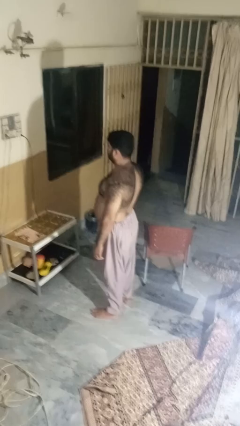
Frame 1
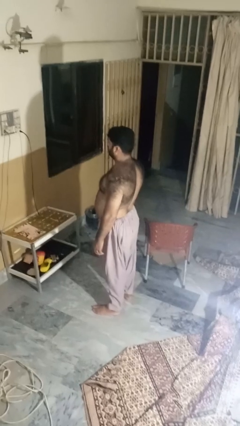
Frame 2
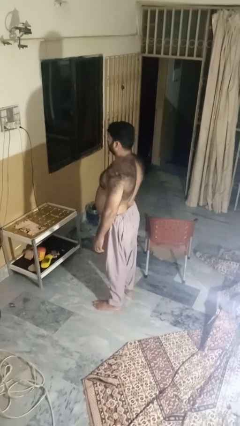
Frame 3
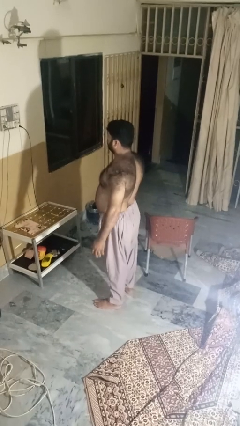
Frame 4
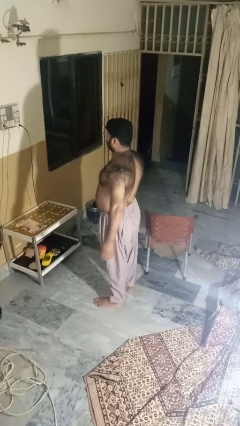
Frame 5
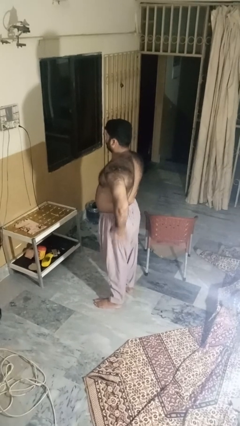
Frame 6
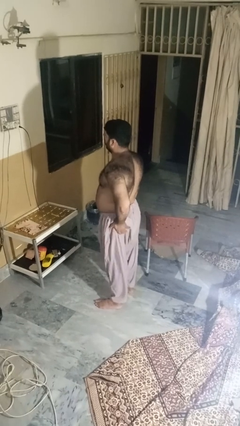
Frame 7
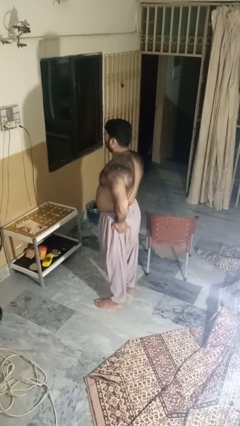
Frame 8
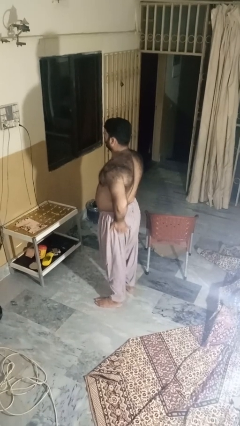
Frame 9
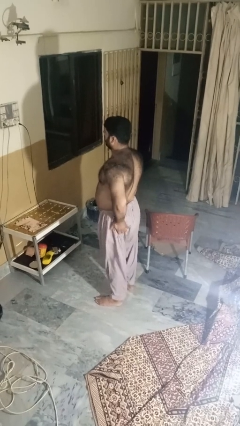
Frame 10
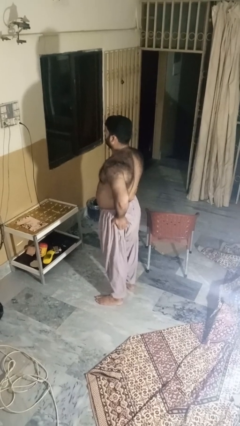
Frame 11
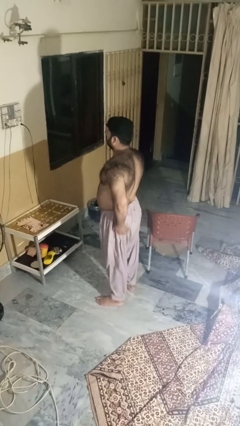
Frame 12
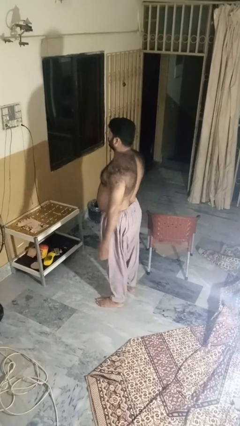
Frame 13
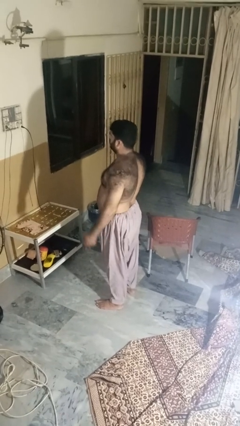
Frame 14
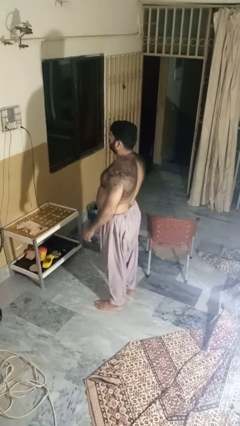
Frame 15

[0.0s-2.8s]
person wiggles hips

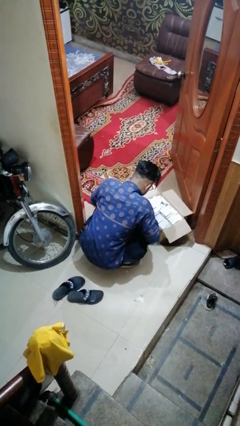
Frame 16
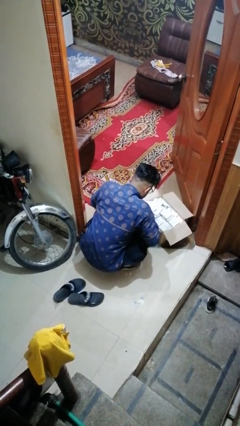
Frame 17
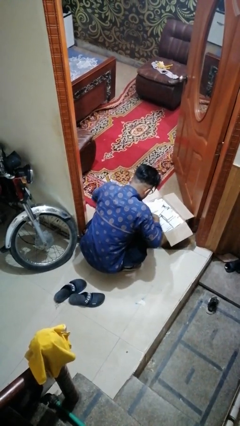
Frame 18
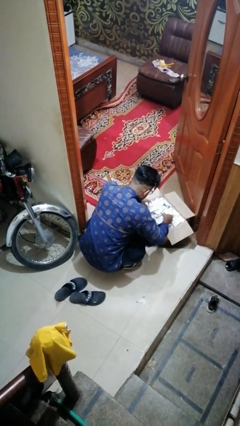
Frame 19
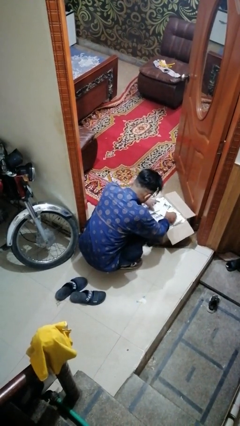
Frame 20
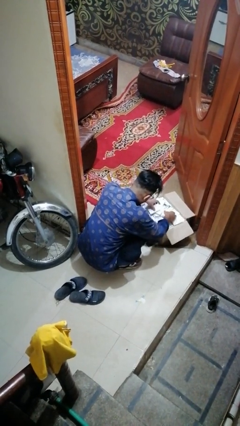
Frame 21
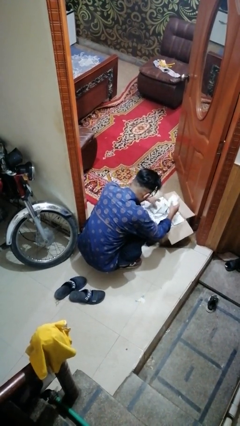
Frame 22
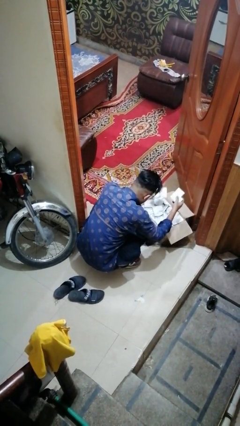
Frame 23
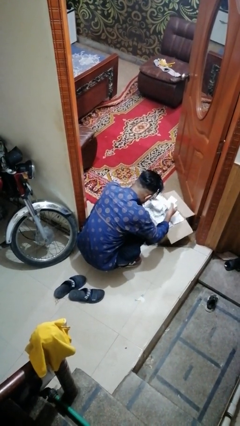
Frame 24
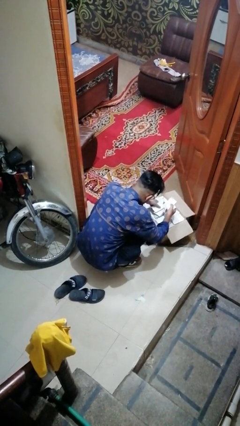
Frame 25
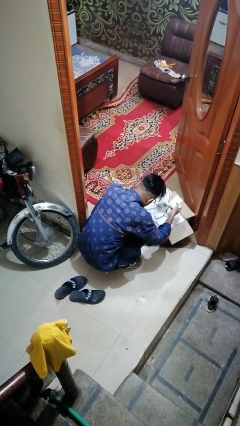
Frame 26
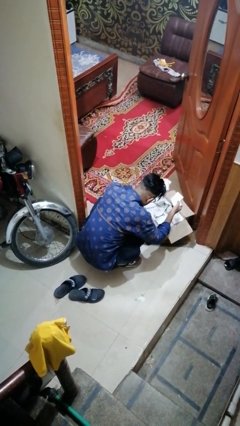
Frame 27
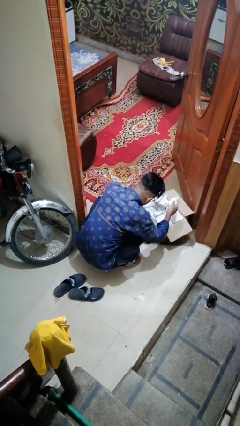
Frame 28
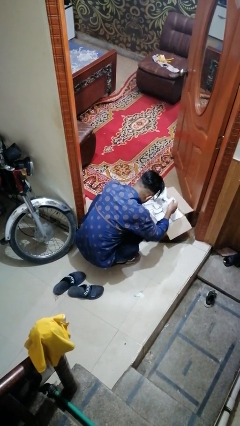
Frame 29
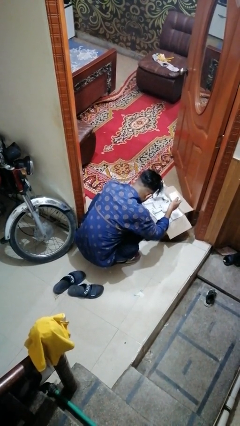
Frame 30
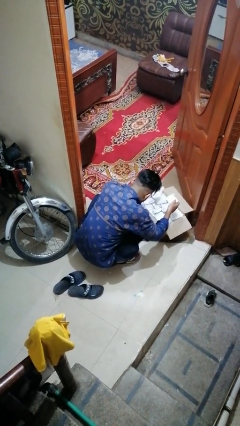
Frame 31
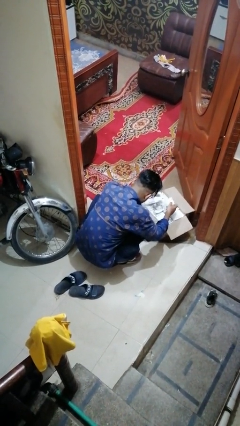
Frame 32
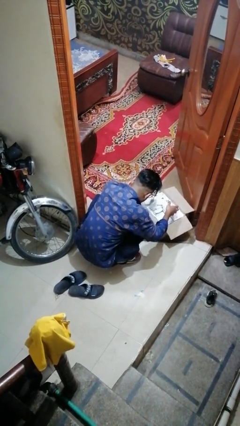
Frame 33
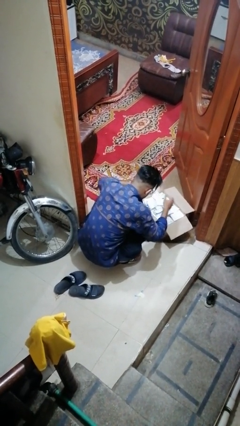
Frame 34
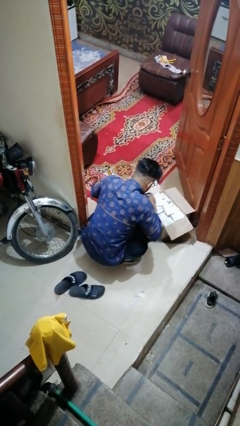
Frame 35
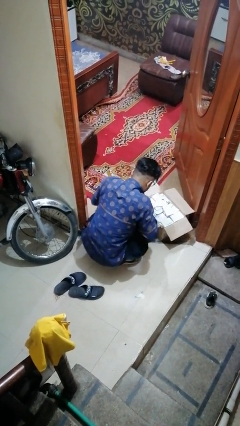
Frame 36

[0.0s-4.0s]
person searches in box

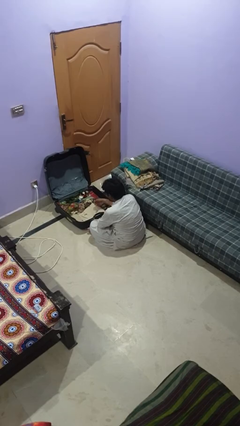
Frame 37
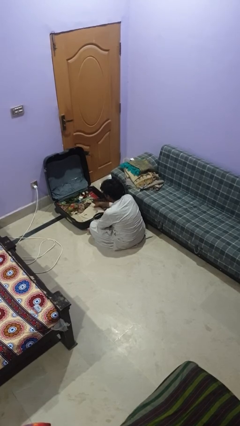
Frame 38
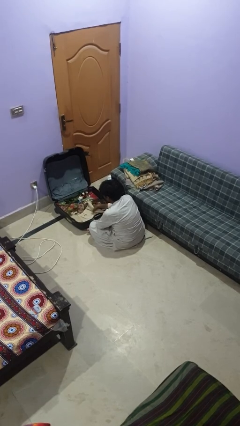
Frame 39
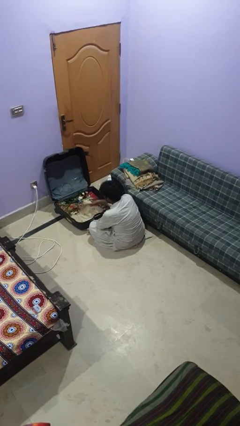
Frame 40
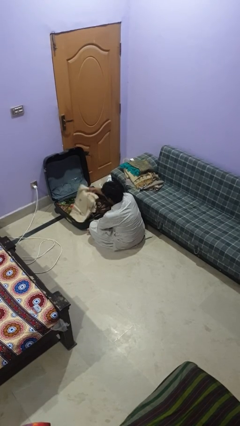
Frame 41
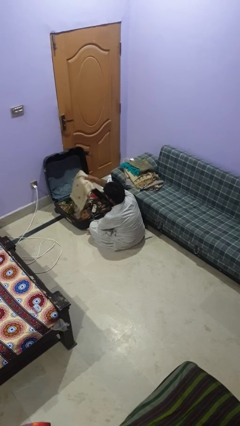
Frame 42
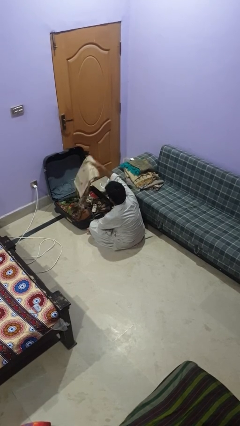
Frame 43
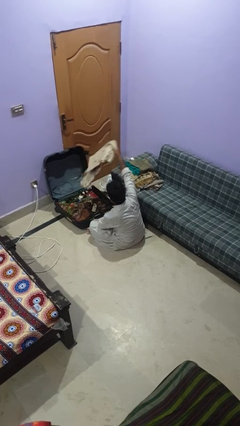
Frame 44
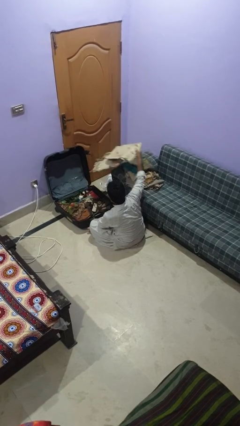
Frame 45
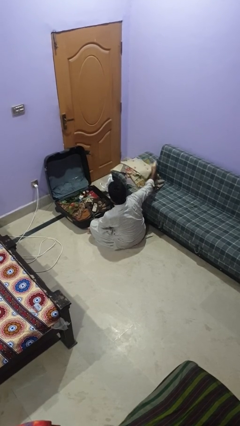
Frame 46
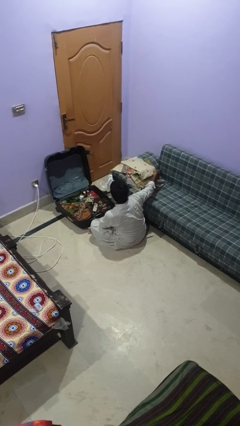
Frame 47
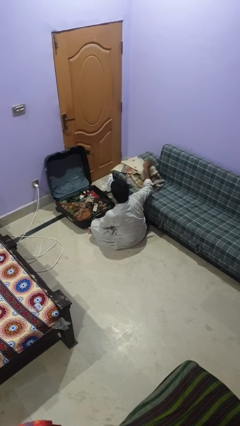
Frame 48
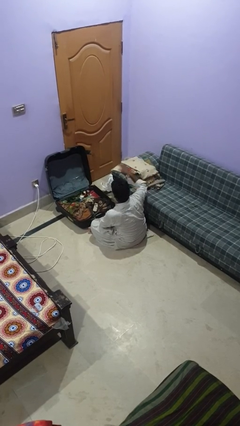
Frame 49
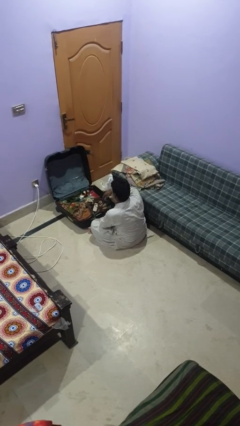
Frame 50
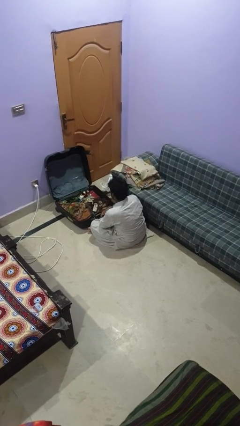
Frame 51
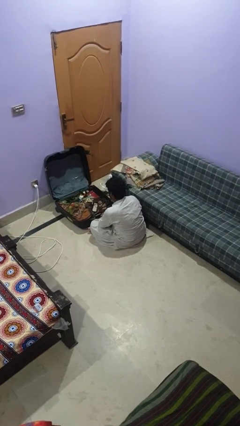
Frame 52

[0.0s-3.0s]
person unloads clothes from suitcase

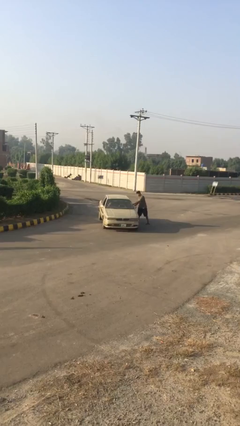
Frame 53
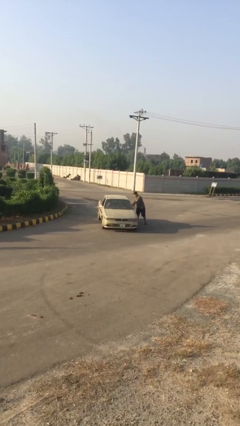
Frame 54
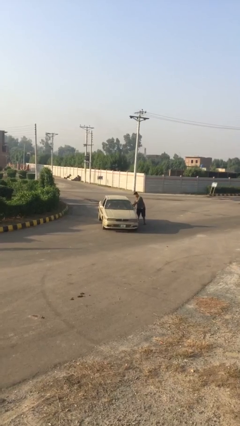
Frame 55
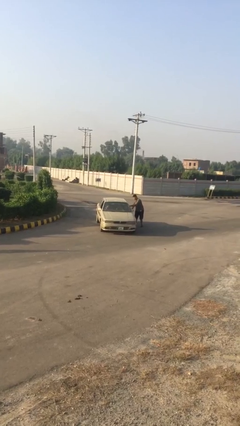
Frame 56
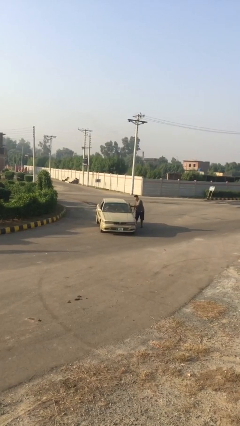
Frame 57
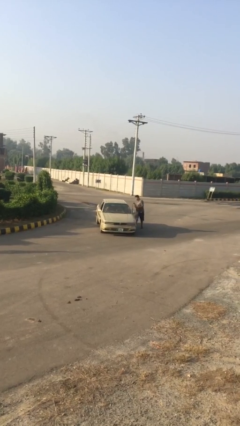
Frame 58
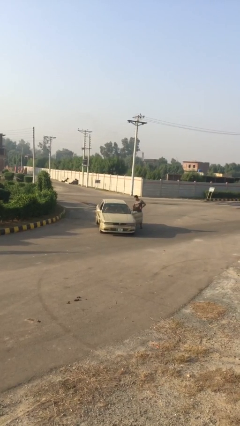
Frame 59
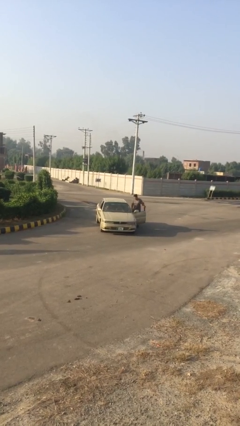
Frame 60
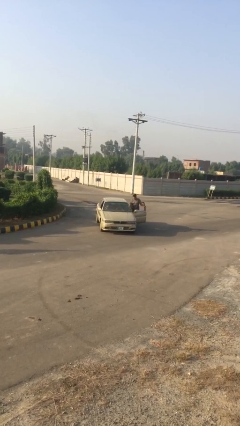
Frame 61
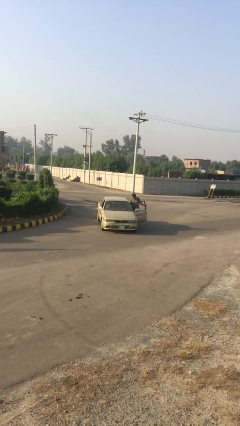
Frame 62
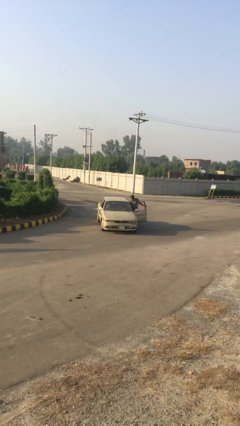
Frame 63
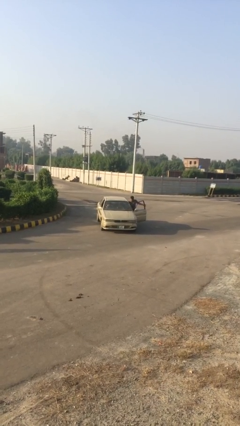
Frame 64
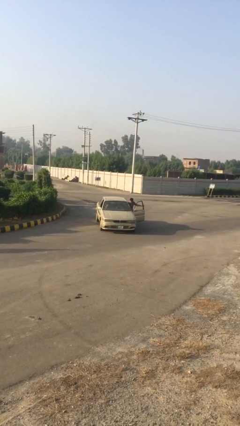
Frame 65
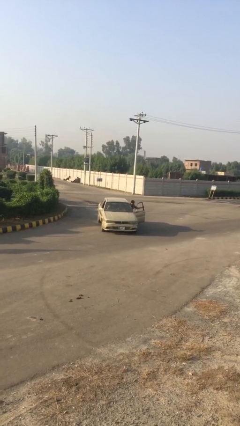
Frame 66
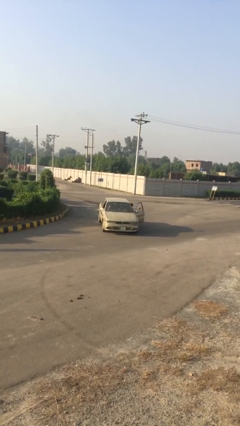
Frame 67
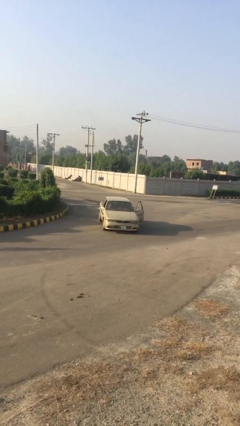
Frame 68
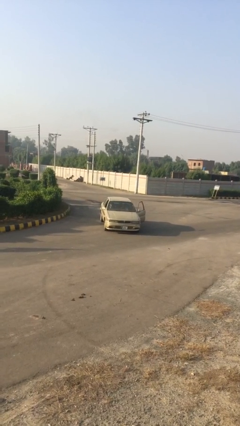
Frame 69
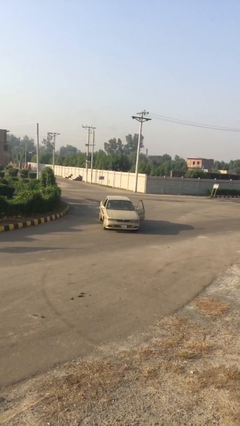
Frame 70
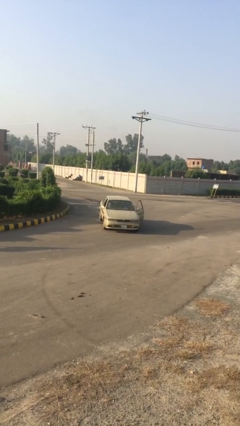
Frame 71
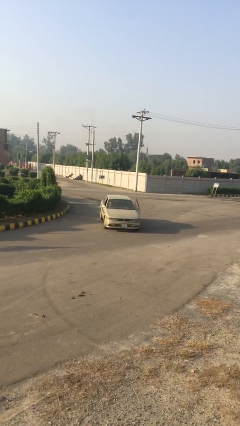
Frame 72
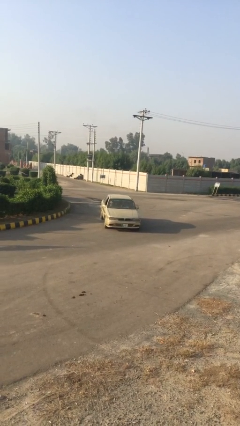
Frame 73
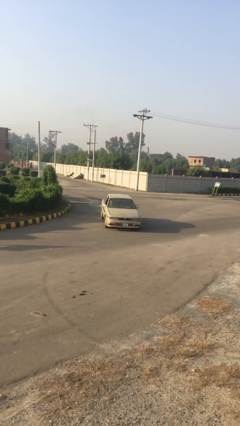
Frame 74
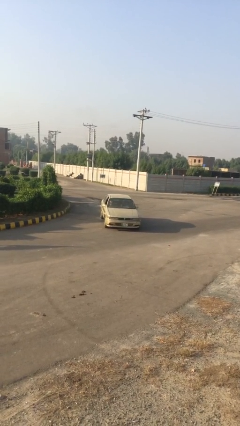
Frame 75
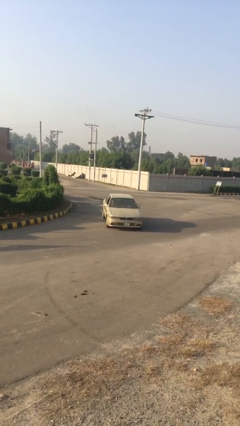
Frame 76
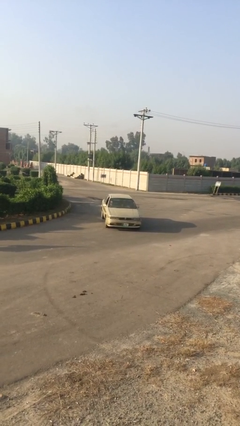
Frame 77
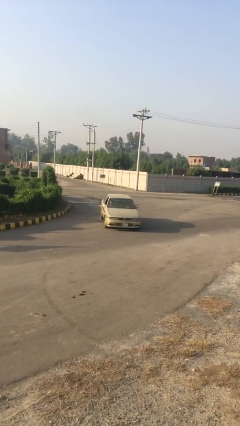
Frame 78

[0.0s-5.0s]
car picks up person

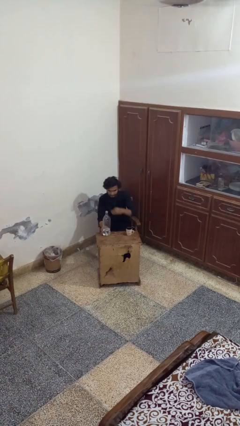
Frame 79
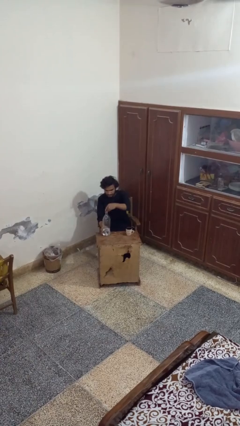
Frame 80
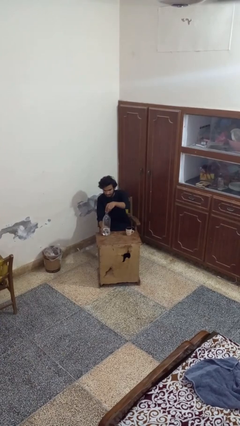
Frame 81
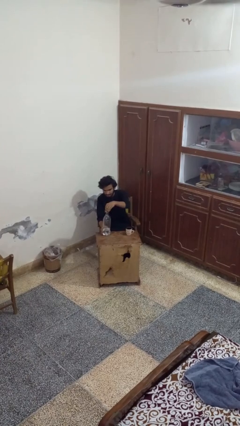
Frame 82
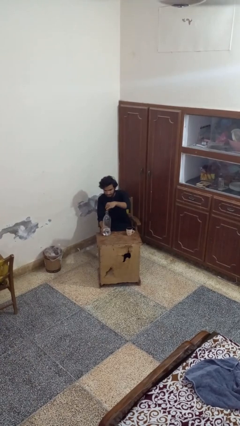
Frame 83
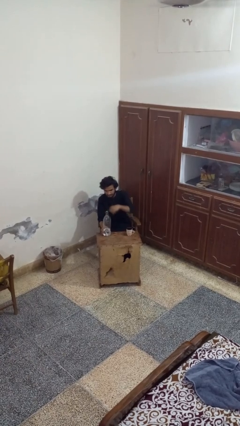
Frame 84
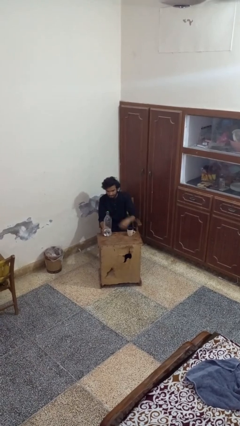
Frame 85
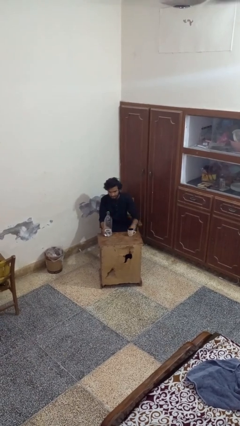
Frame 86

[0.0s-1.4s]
person screws lid to bottle

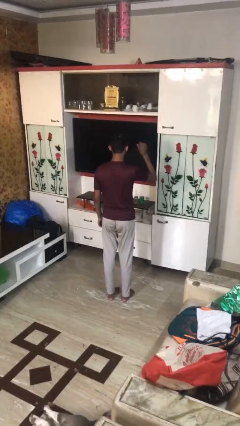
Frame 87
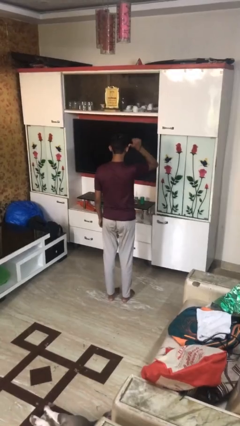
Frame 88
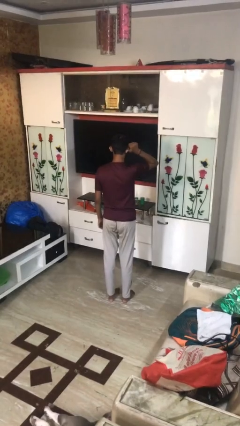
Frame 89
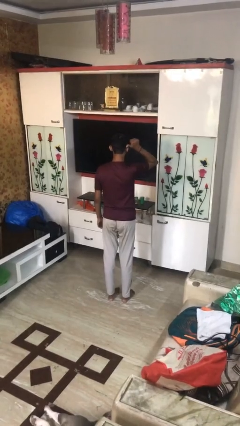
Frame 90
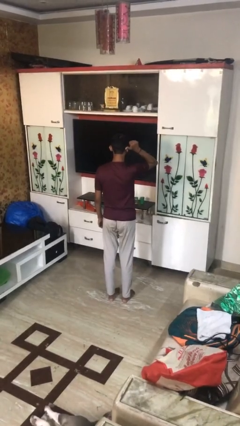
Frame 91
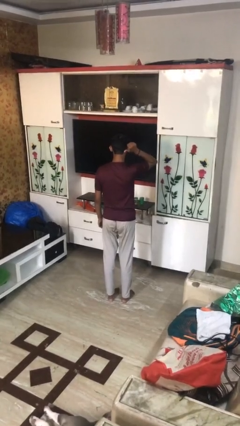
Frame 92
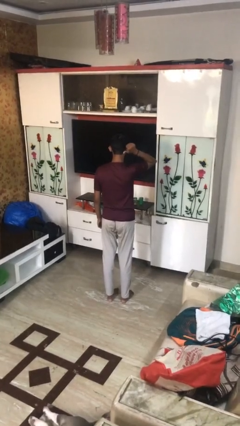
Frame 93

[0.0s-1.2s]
person gestures behind me
